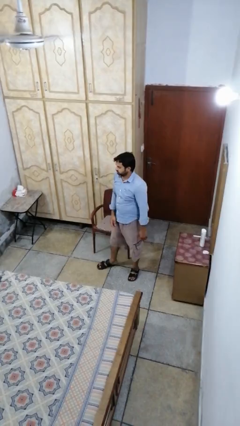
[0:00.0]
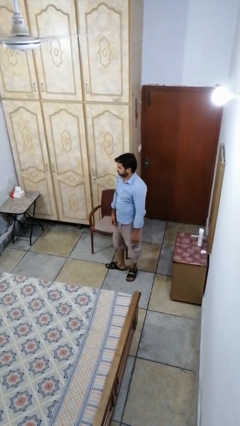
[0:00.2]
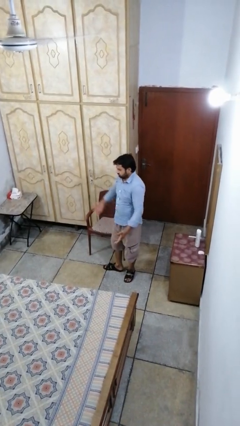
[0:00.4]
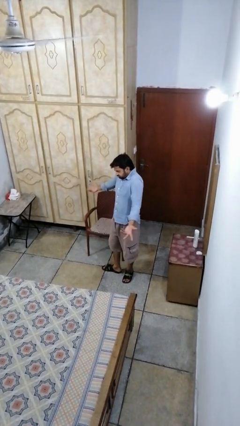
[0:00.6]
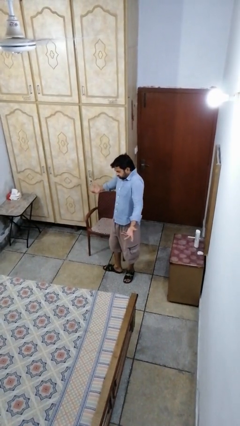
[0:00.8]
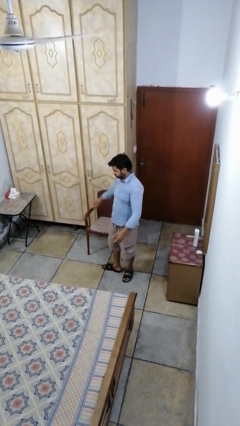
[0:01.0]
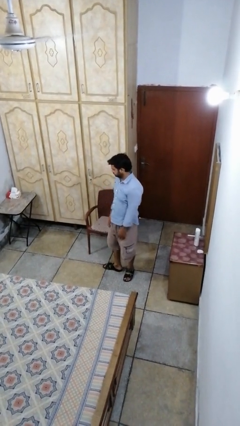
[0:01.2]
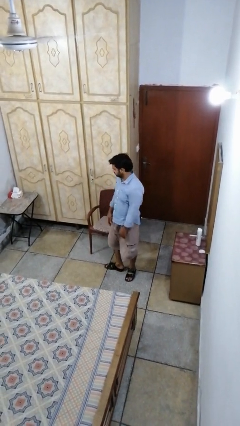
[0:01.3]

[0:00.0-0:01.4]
person shrugs

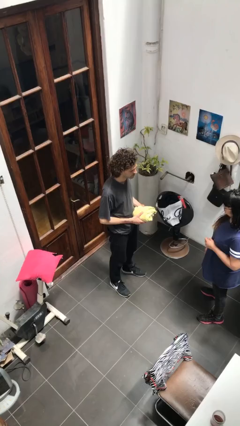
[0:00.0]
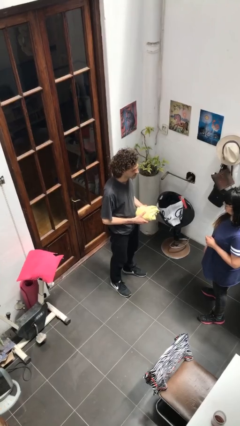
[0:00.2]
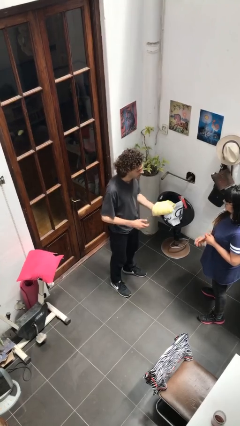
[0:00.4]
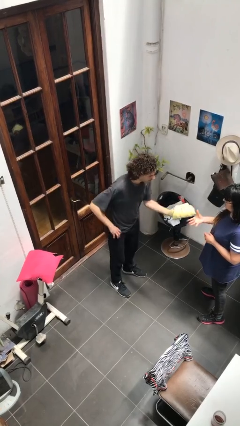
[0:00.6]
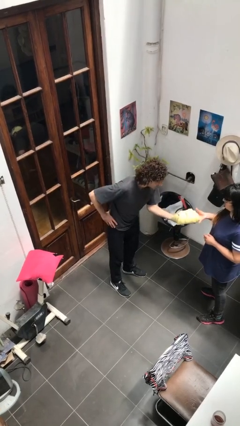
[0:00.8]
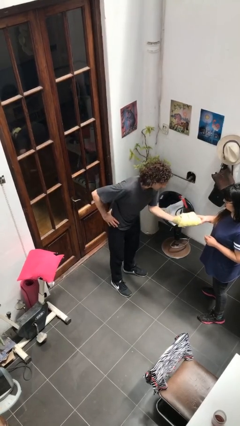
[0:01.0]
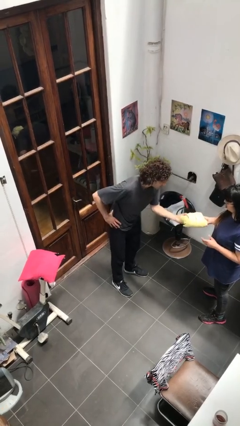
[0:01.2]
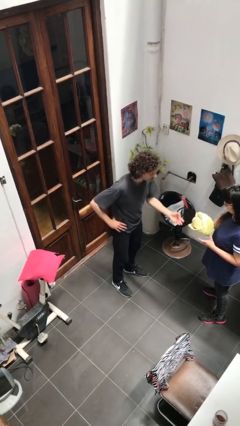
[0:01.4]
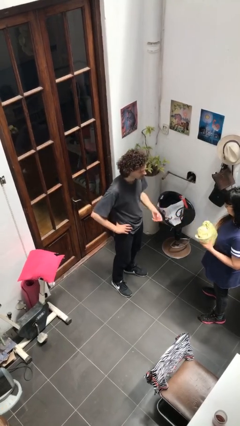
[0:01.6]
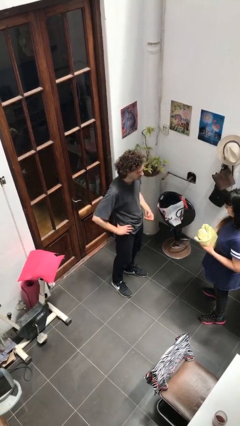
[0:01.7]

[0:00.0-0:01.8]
person transfers object to person

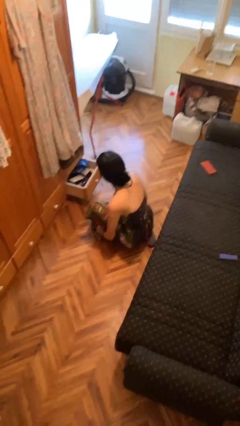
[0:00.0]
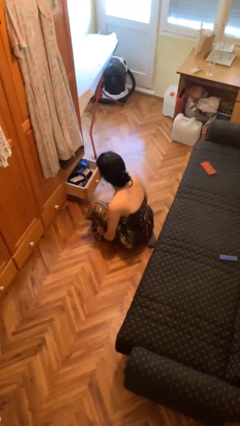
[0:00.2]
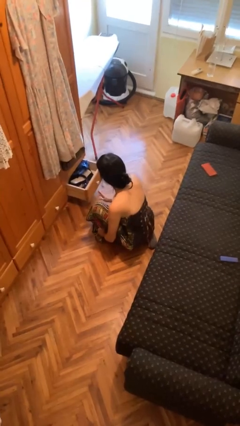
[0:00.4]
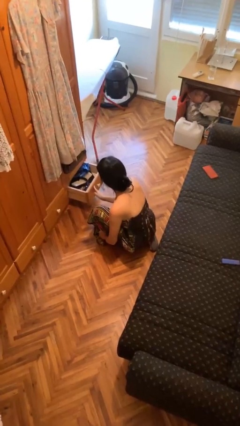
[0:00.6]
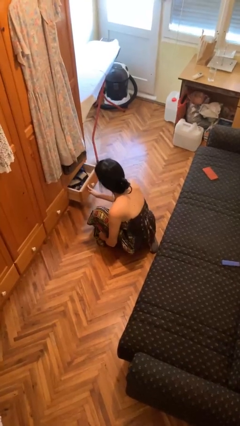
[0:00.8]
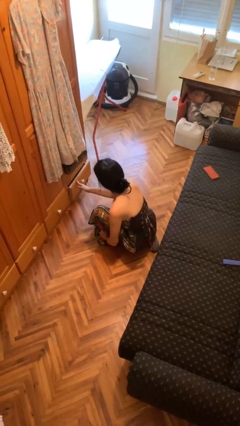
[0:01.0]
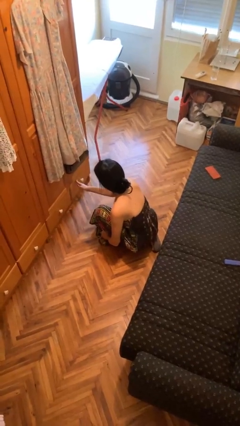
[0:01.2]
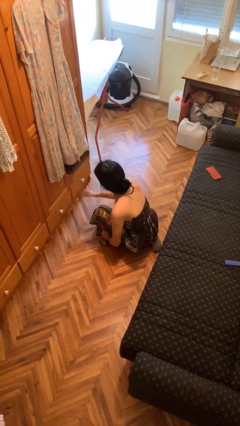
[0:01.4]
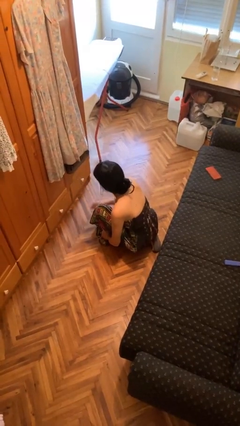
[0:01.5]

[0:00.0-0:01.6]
person closes dresser drawer

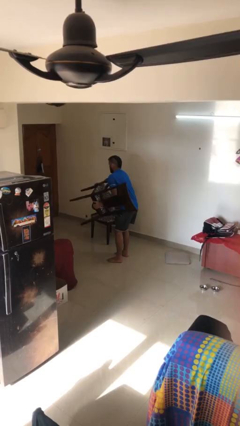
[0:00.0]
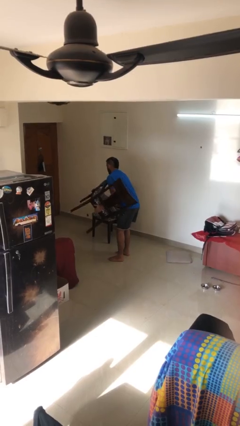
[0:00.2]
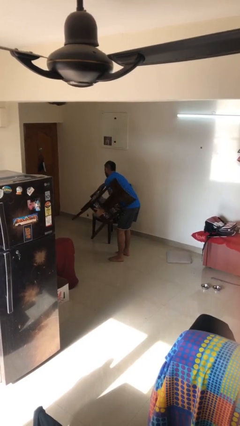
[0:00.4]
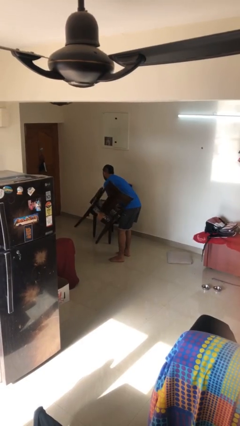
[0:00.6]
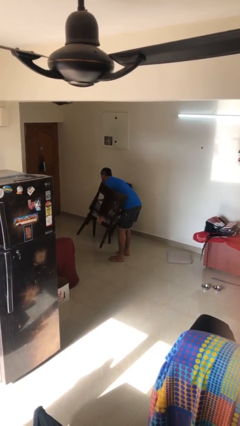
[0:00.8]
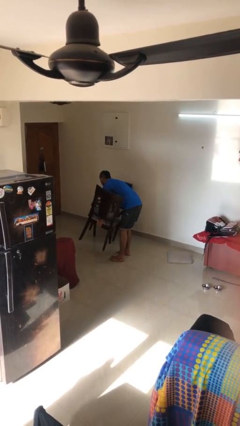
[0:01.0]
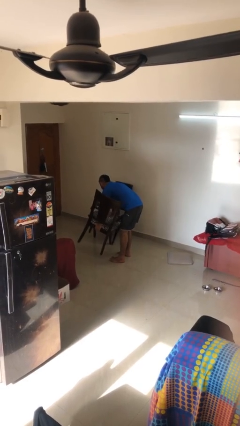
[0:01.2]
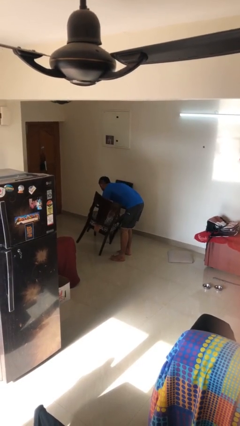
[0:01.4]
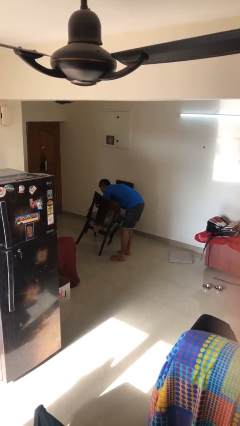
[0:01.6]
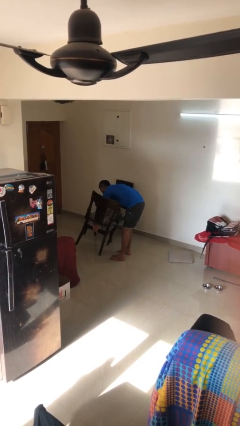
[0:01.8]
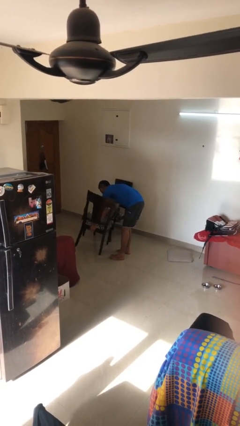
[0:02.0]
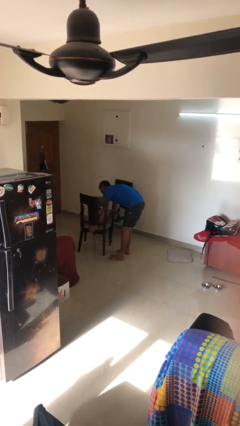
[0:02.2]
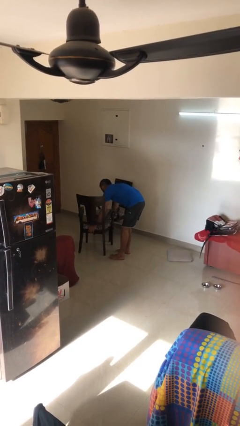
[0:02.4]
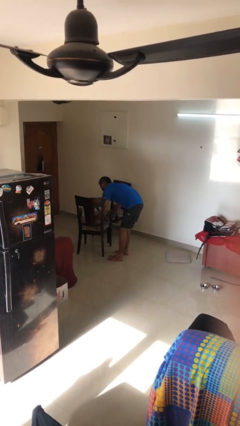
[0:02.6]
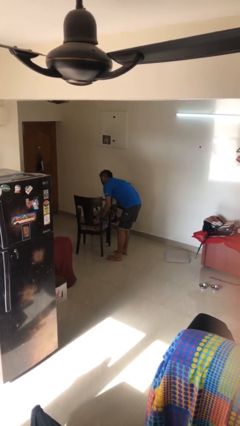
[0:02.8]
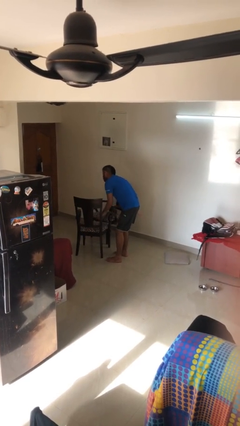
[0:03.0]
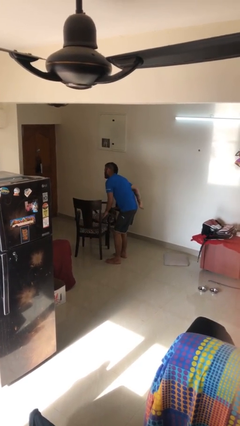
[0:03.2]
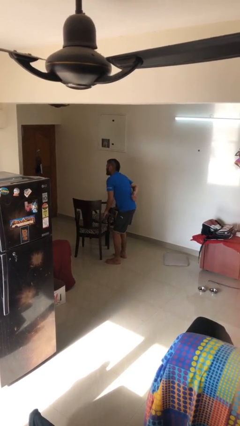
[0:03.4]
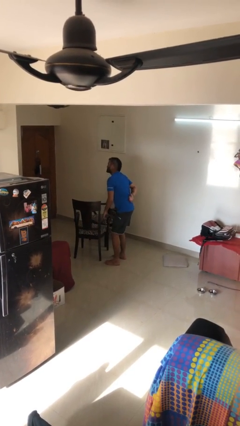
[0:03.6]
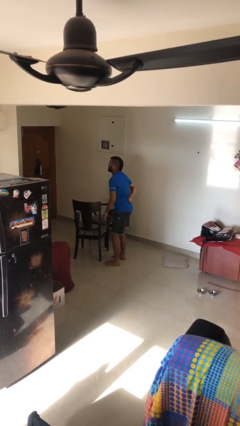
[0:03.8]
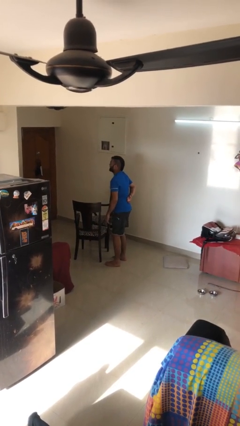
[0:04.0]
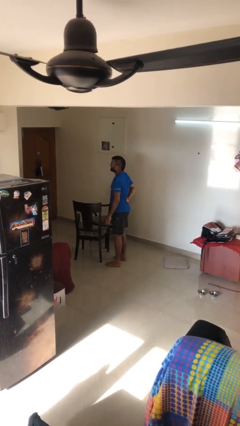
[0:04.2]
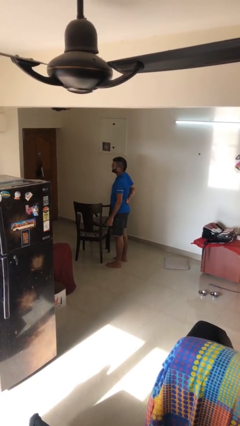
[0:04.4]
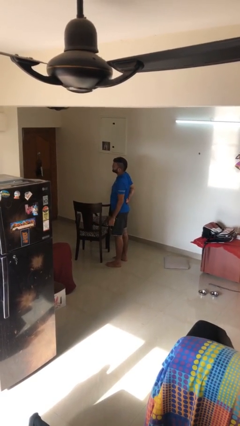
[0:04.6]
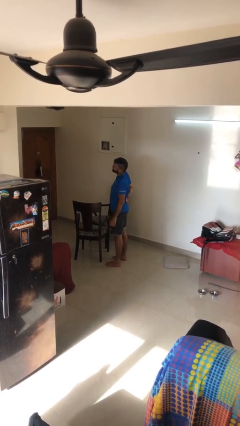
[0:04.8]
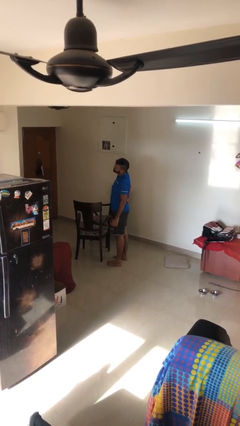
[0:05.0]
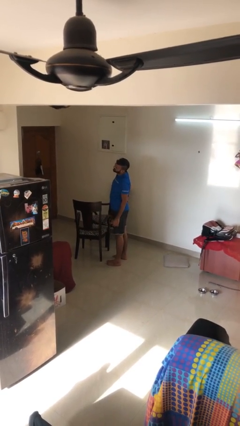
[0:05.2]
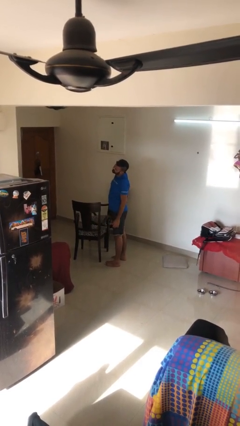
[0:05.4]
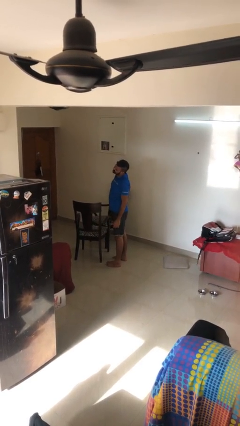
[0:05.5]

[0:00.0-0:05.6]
person puts down object on floor

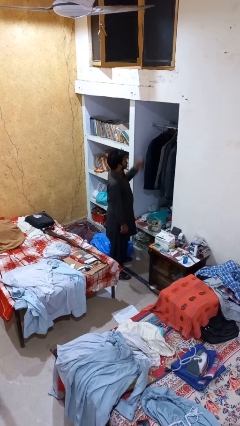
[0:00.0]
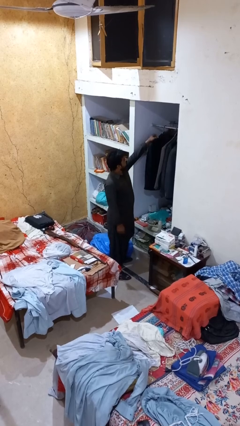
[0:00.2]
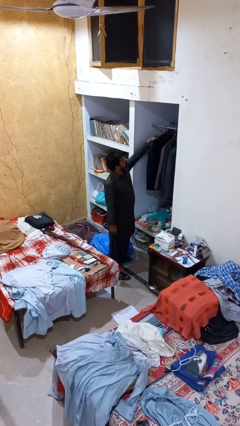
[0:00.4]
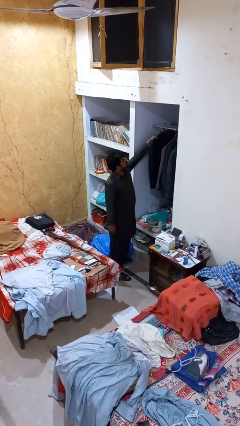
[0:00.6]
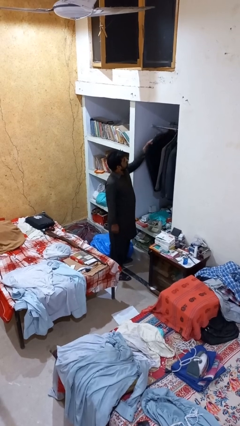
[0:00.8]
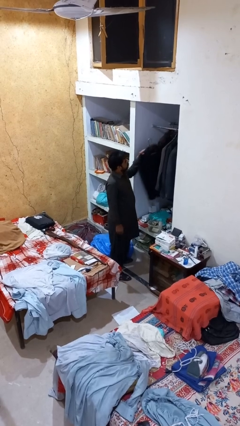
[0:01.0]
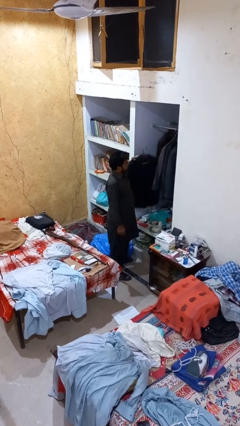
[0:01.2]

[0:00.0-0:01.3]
person takes clothes from closet

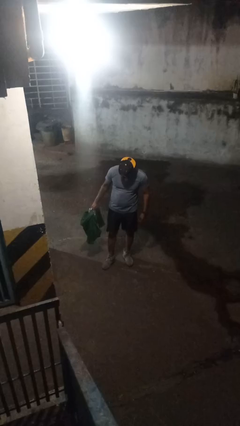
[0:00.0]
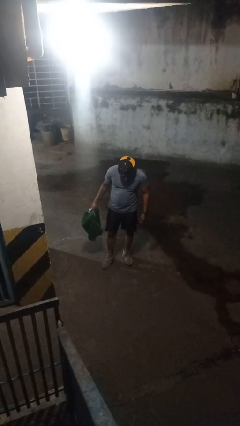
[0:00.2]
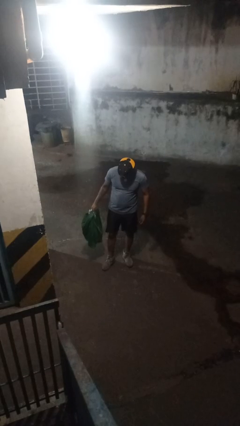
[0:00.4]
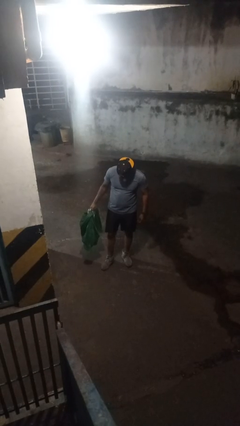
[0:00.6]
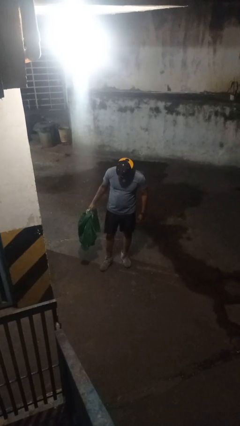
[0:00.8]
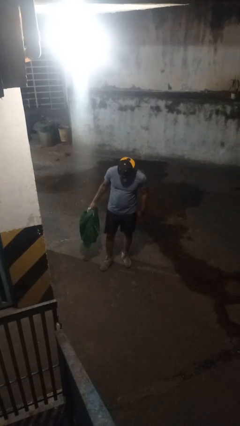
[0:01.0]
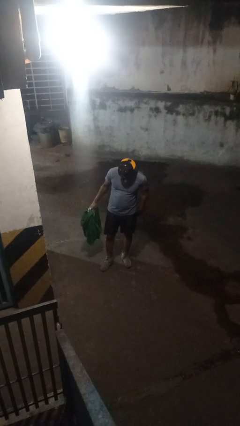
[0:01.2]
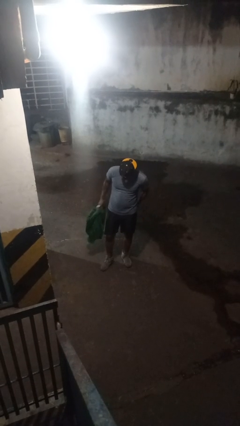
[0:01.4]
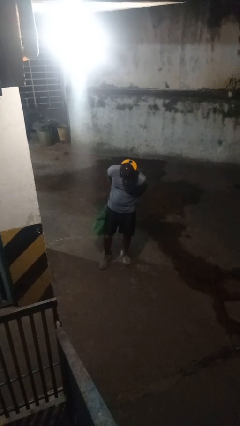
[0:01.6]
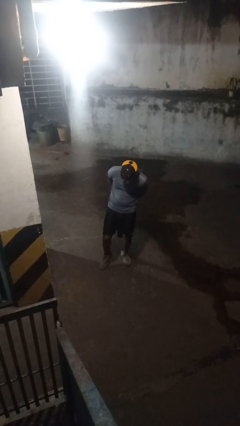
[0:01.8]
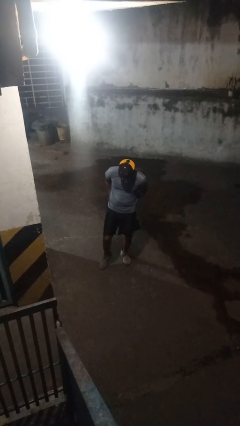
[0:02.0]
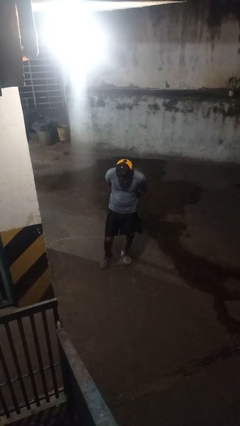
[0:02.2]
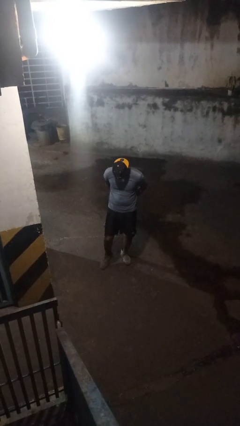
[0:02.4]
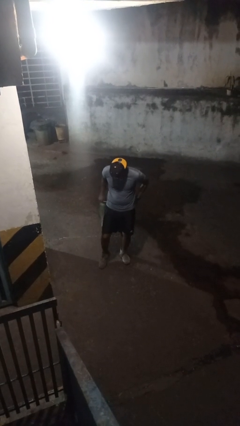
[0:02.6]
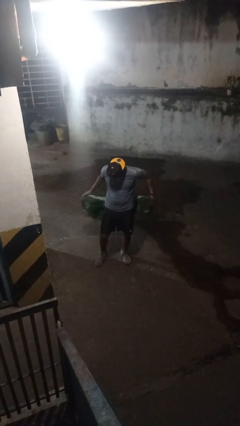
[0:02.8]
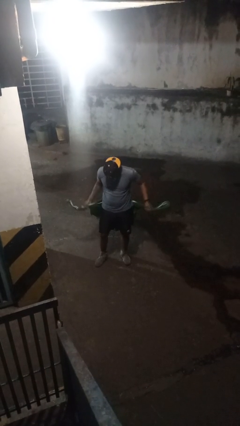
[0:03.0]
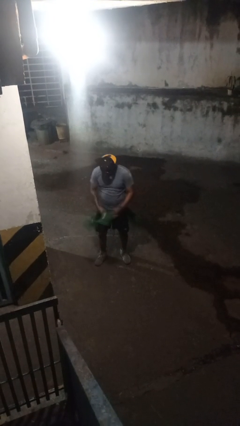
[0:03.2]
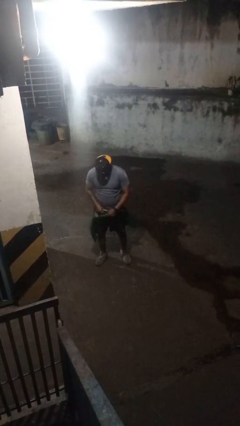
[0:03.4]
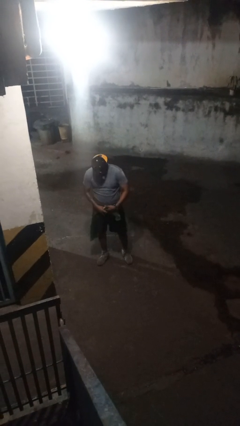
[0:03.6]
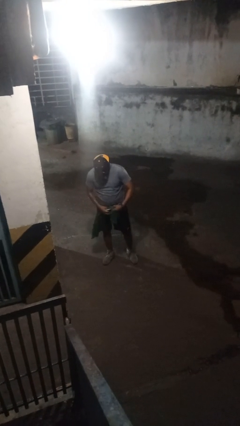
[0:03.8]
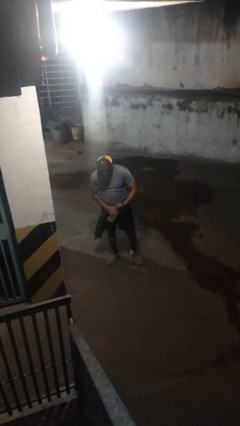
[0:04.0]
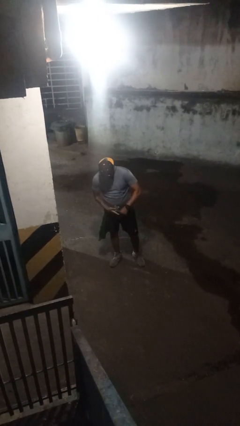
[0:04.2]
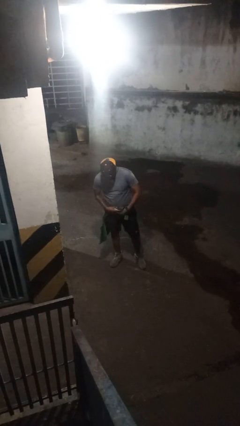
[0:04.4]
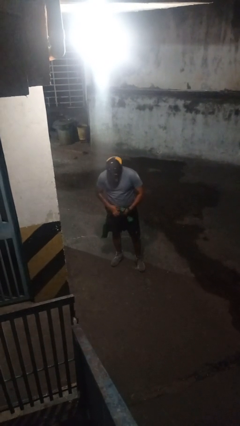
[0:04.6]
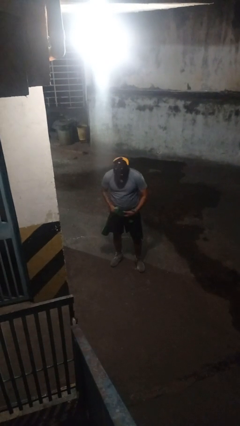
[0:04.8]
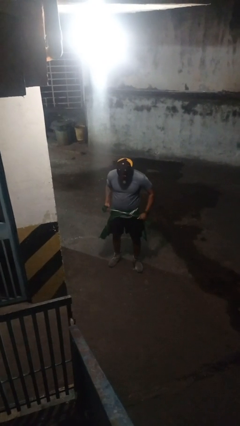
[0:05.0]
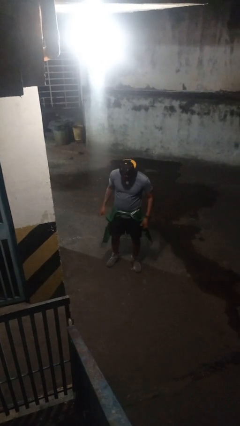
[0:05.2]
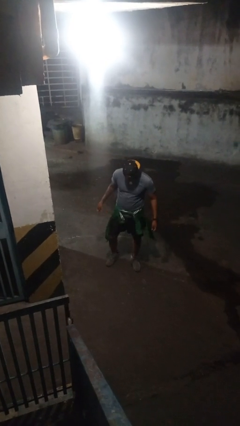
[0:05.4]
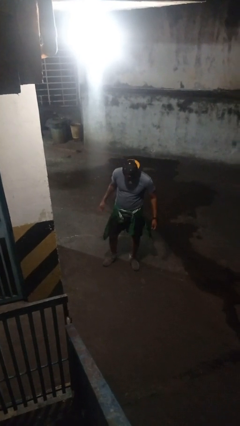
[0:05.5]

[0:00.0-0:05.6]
person ties jacket around waist
